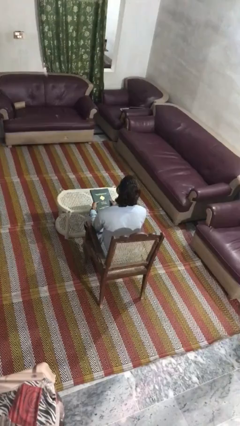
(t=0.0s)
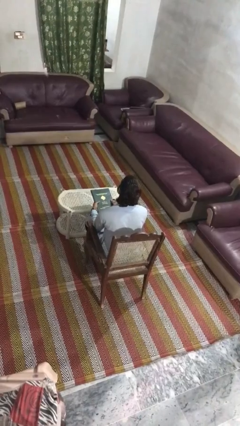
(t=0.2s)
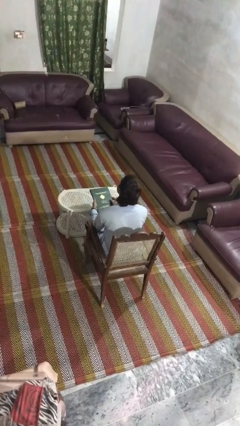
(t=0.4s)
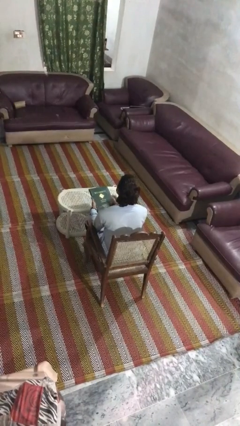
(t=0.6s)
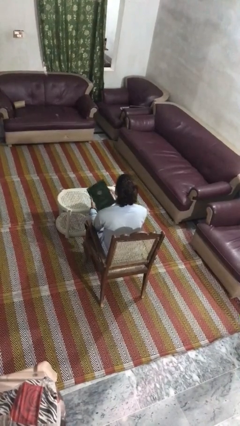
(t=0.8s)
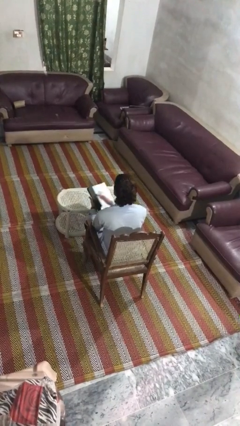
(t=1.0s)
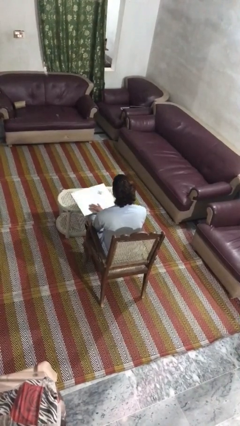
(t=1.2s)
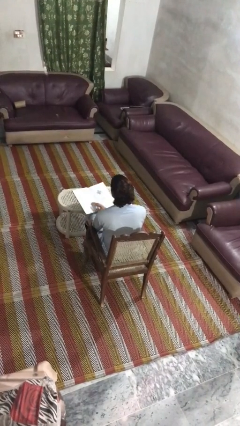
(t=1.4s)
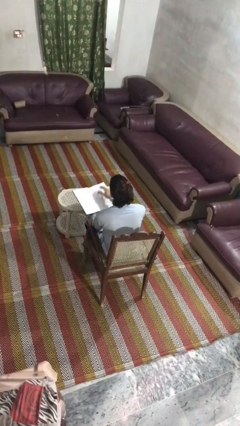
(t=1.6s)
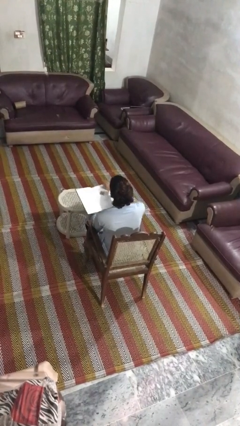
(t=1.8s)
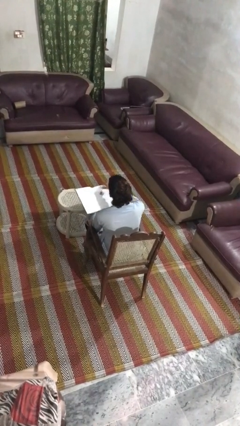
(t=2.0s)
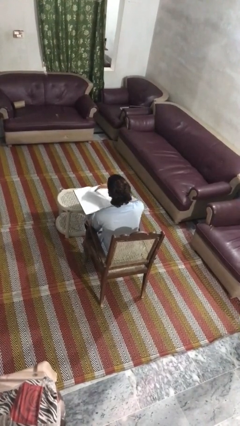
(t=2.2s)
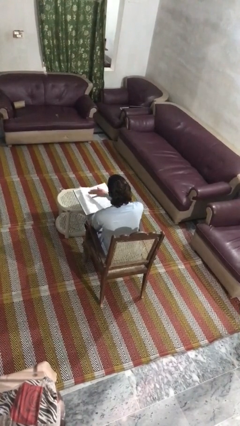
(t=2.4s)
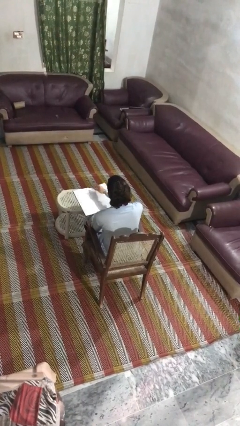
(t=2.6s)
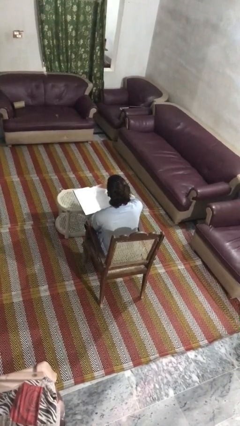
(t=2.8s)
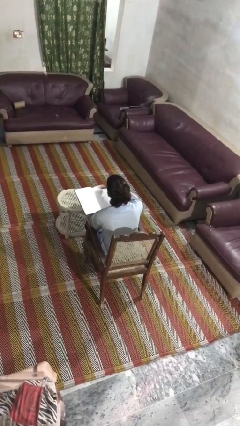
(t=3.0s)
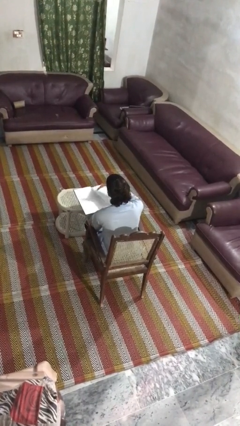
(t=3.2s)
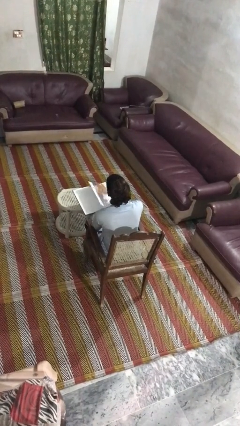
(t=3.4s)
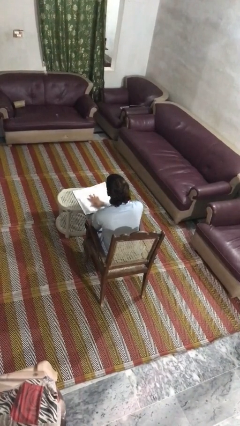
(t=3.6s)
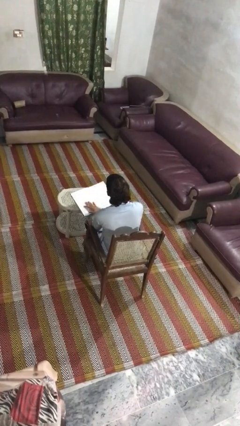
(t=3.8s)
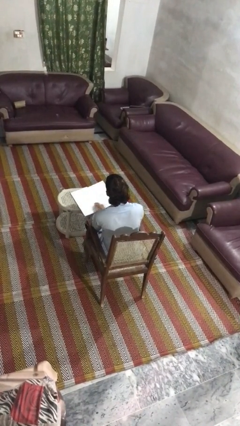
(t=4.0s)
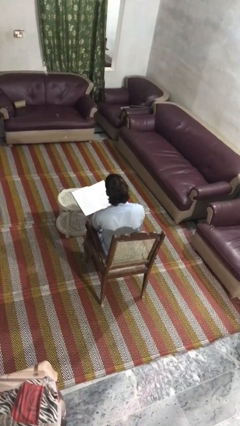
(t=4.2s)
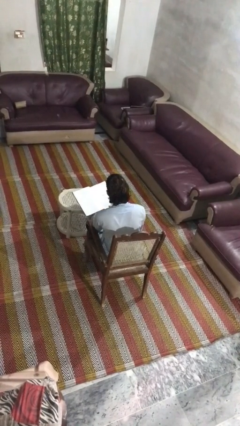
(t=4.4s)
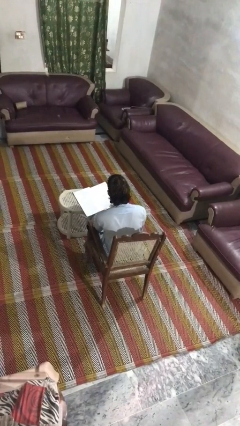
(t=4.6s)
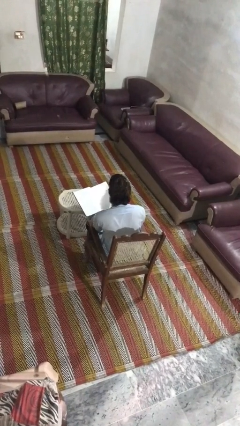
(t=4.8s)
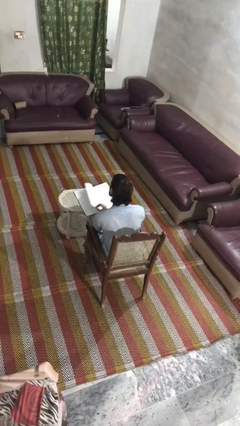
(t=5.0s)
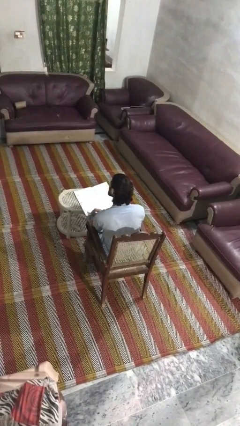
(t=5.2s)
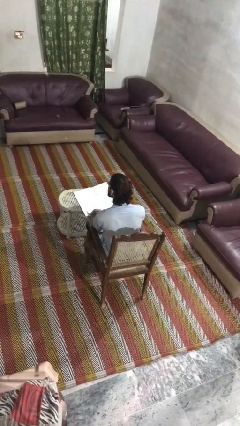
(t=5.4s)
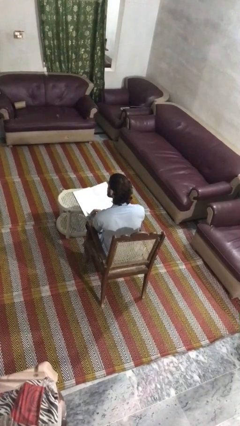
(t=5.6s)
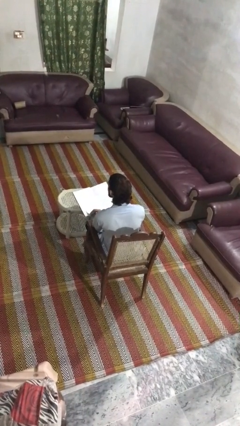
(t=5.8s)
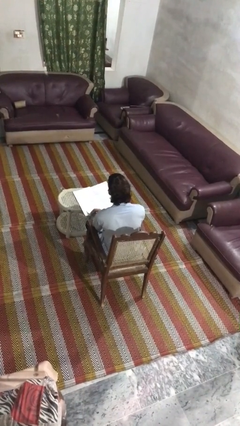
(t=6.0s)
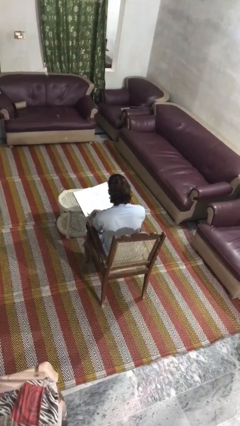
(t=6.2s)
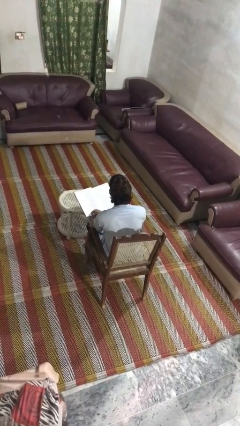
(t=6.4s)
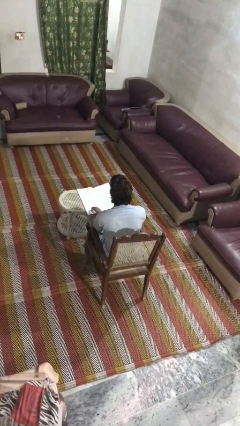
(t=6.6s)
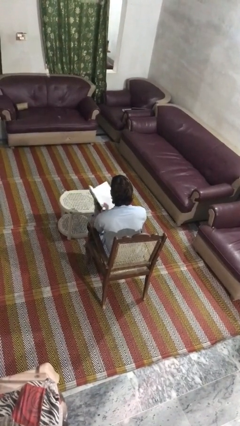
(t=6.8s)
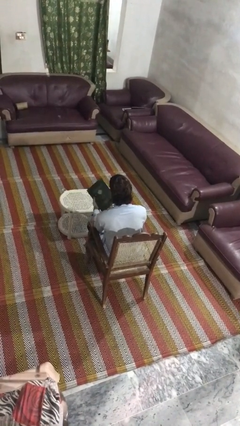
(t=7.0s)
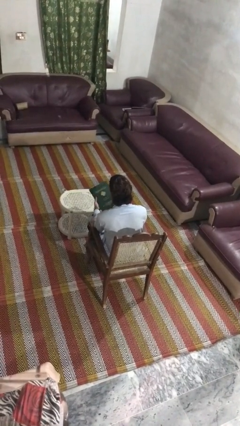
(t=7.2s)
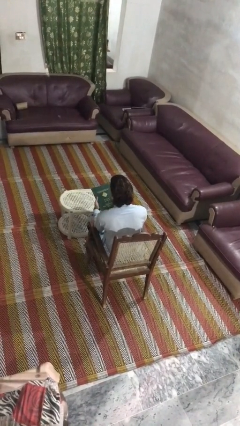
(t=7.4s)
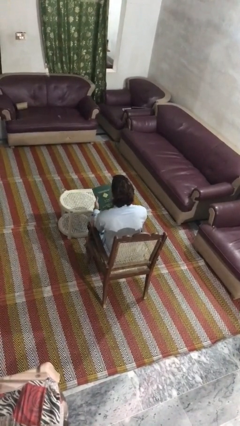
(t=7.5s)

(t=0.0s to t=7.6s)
person reads book

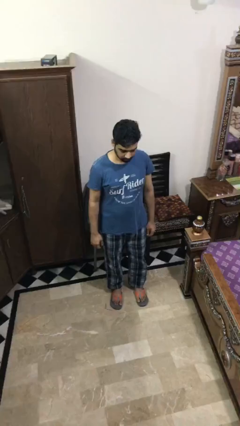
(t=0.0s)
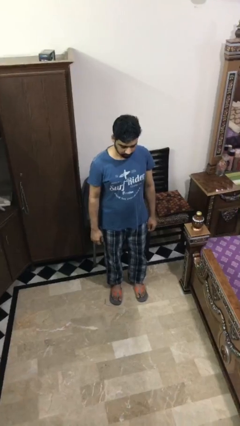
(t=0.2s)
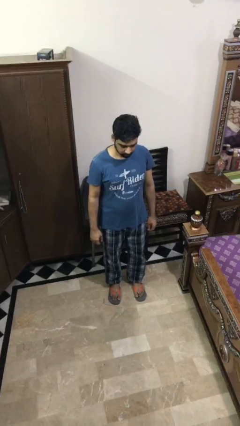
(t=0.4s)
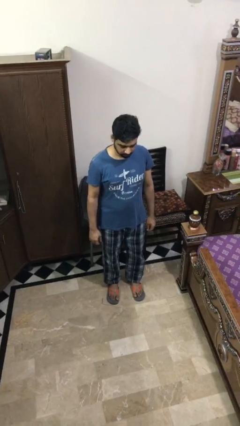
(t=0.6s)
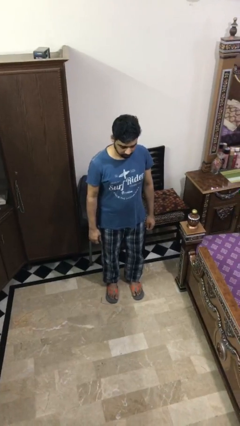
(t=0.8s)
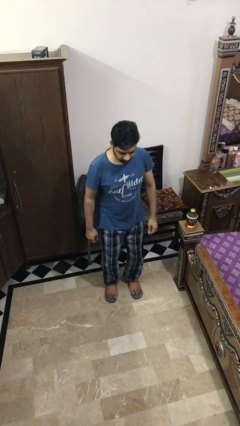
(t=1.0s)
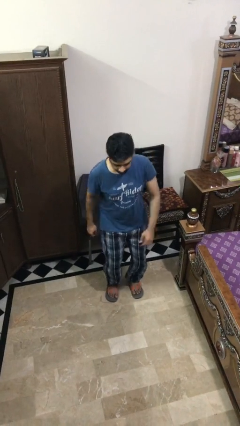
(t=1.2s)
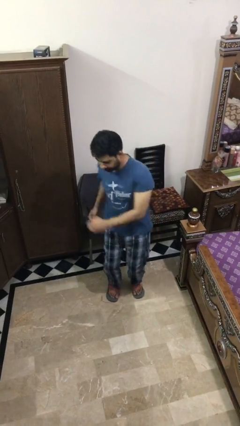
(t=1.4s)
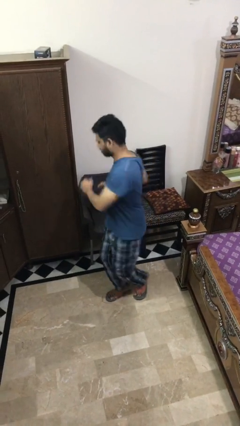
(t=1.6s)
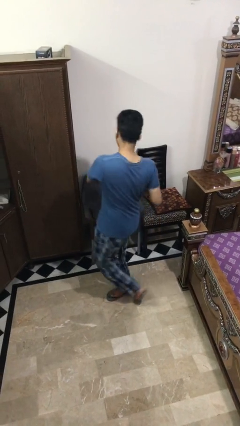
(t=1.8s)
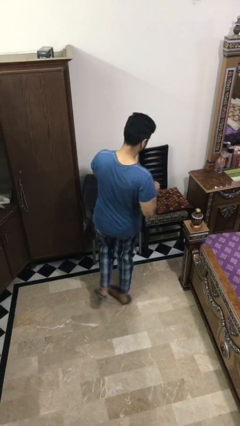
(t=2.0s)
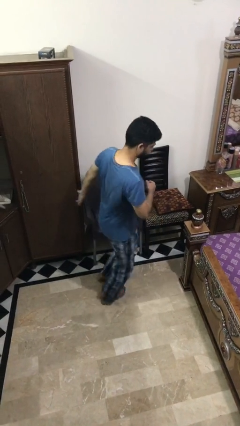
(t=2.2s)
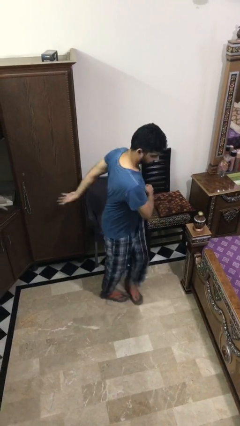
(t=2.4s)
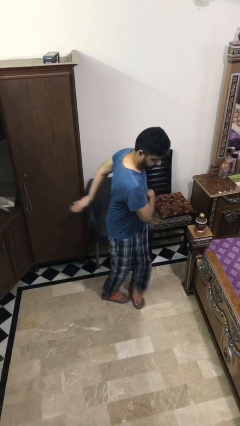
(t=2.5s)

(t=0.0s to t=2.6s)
person twirls

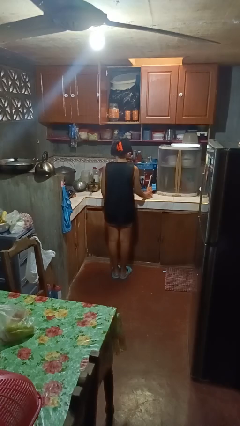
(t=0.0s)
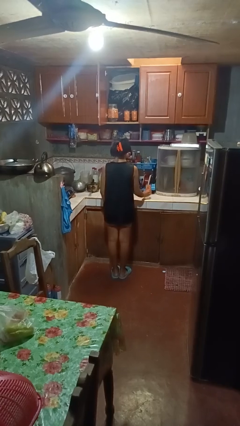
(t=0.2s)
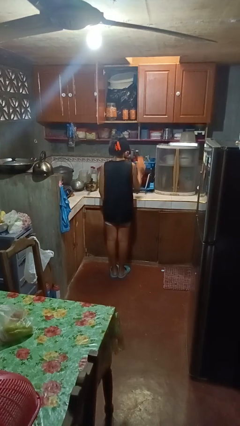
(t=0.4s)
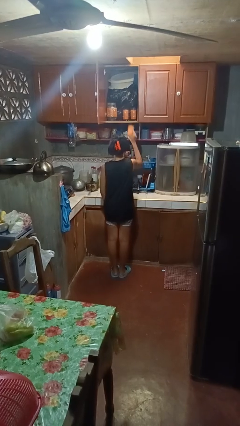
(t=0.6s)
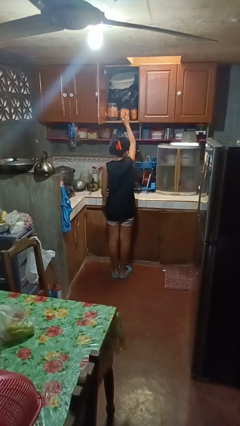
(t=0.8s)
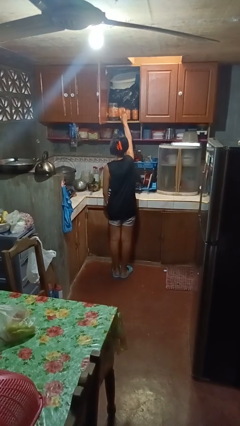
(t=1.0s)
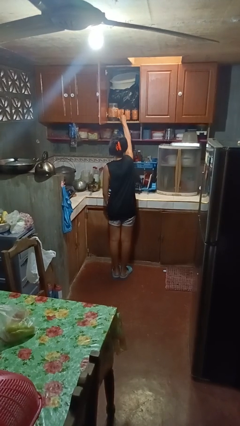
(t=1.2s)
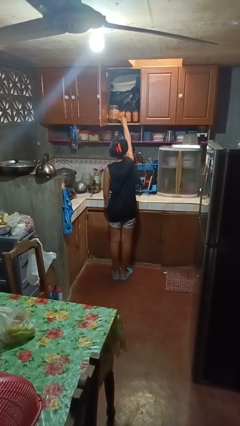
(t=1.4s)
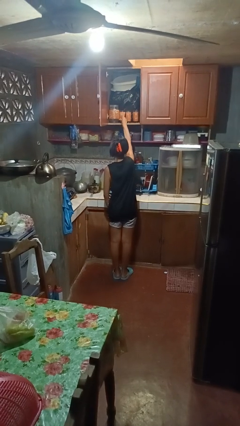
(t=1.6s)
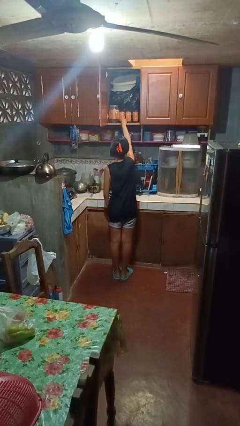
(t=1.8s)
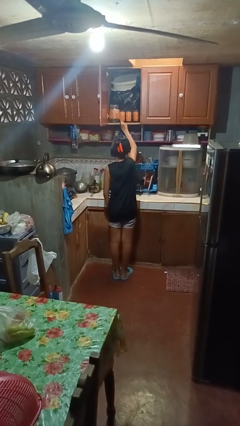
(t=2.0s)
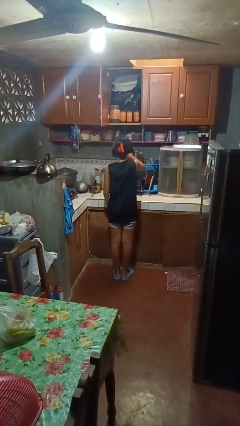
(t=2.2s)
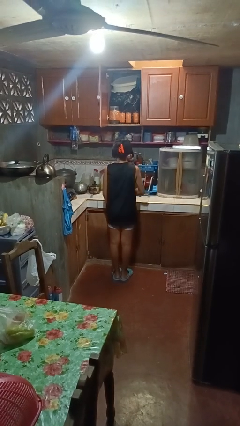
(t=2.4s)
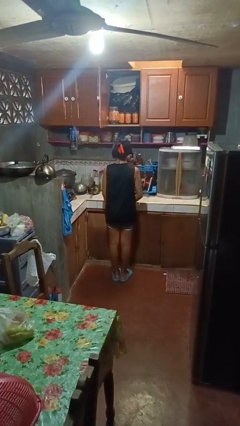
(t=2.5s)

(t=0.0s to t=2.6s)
person puts object in cabinet

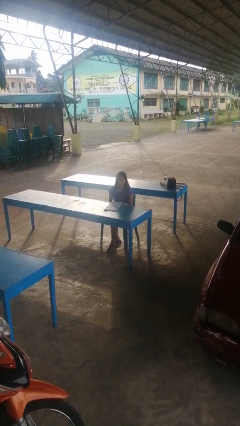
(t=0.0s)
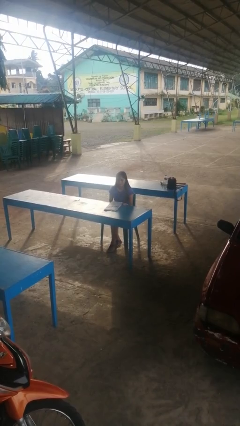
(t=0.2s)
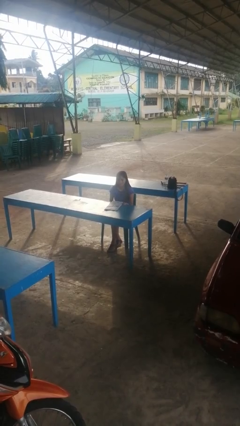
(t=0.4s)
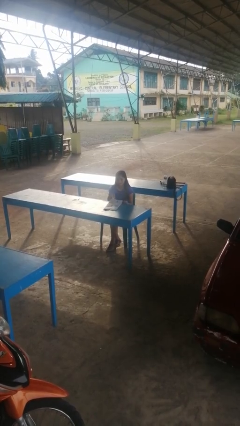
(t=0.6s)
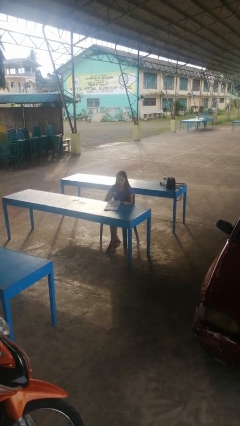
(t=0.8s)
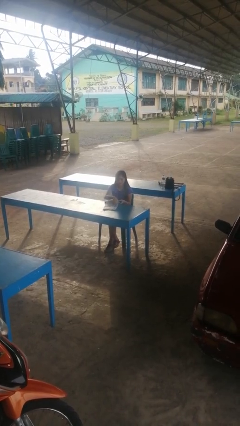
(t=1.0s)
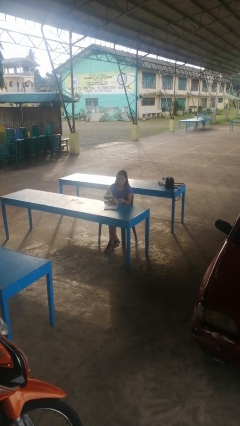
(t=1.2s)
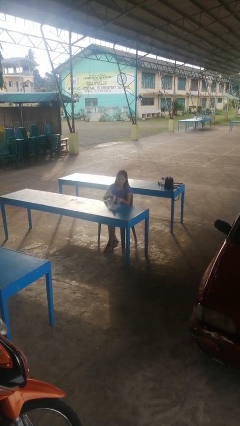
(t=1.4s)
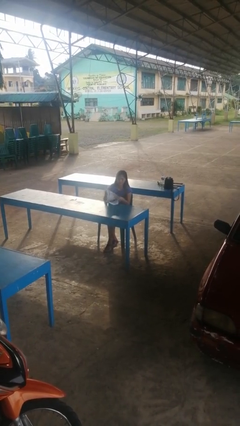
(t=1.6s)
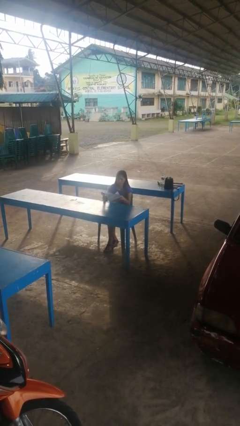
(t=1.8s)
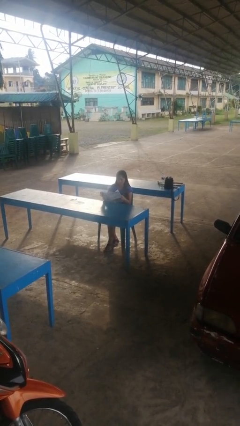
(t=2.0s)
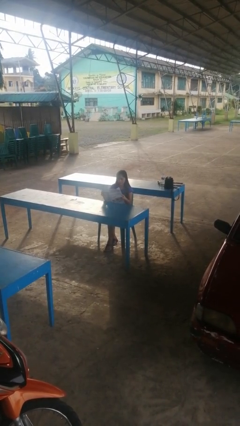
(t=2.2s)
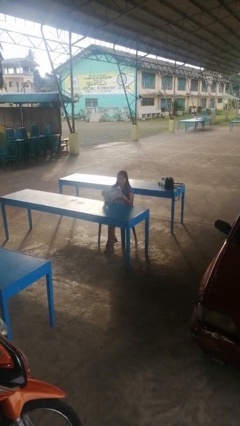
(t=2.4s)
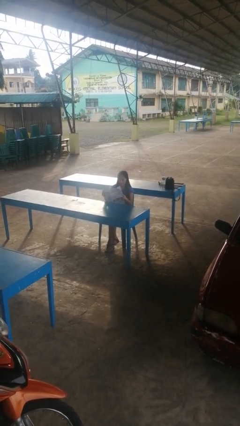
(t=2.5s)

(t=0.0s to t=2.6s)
person reads newspaper

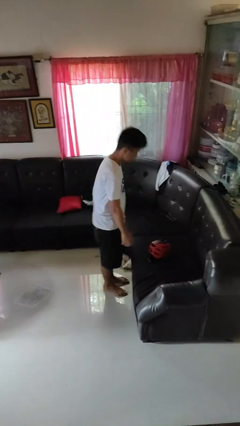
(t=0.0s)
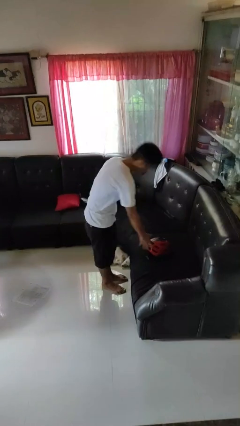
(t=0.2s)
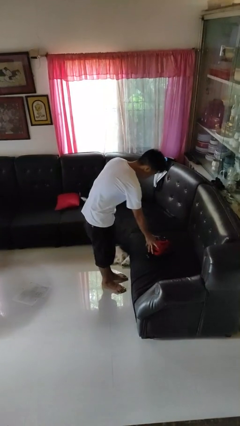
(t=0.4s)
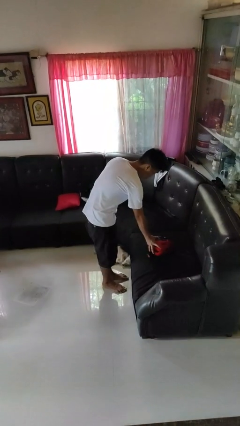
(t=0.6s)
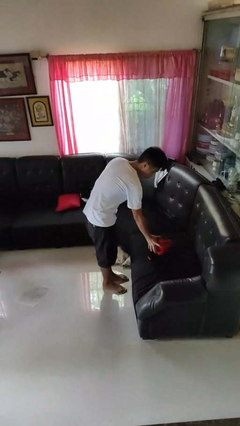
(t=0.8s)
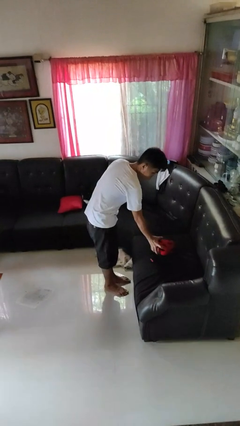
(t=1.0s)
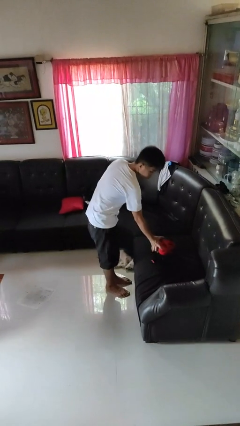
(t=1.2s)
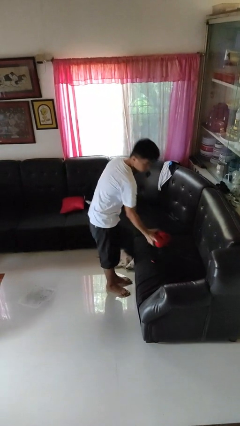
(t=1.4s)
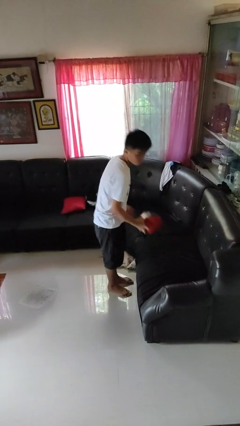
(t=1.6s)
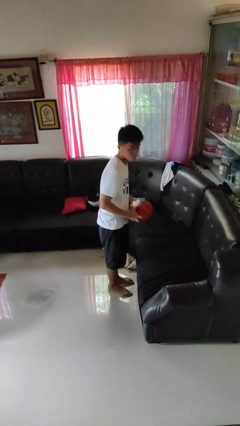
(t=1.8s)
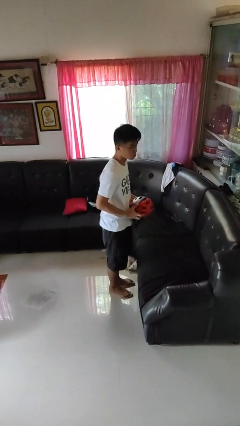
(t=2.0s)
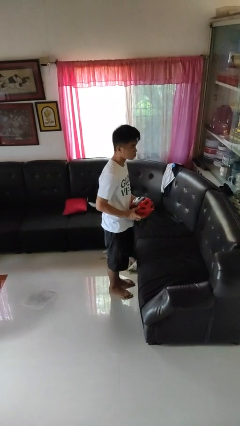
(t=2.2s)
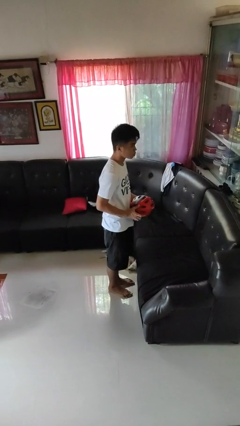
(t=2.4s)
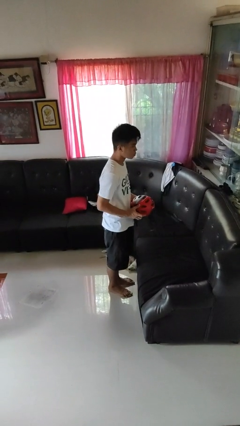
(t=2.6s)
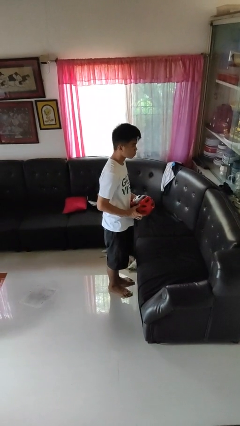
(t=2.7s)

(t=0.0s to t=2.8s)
person picks up object from couch
